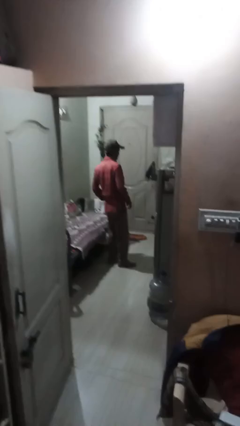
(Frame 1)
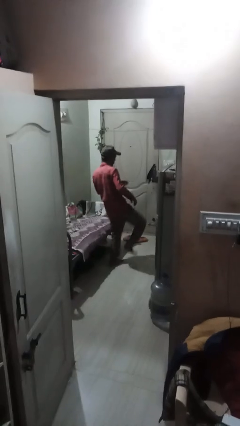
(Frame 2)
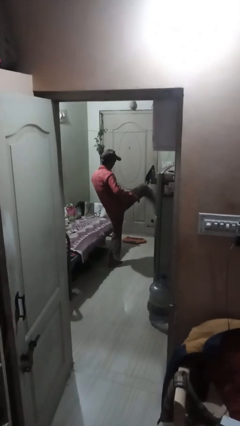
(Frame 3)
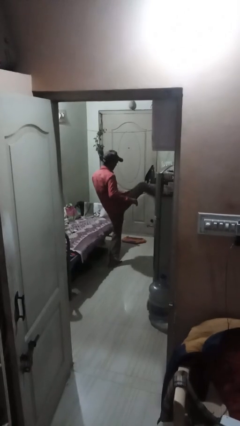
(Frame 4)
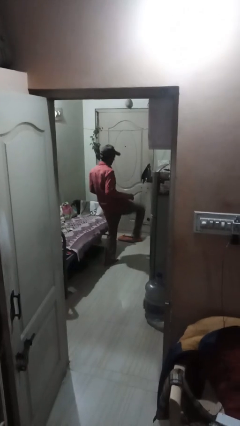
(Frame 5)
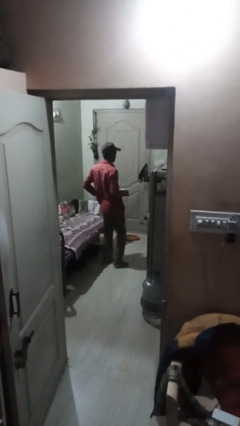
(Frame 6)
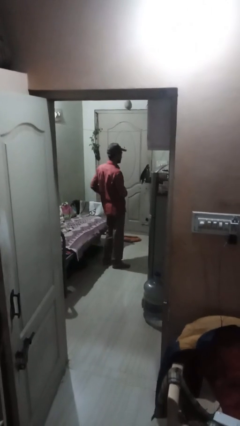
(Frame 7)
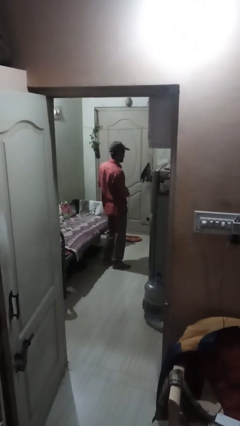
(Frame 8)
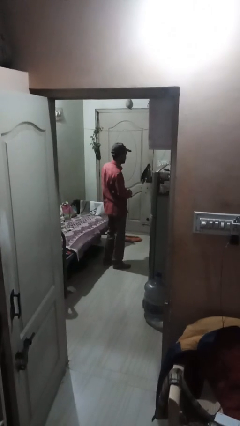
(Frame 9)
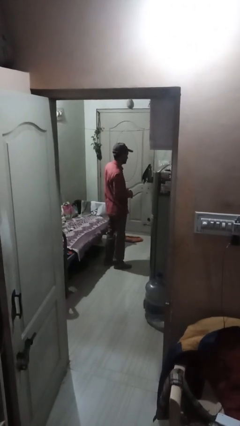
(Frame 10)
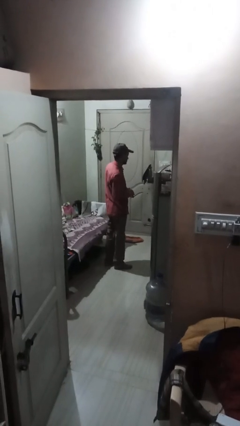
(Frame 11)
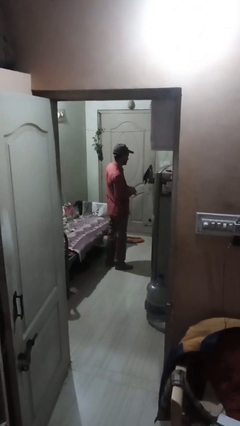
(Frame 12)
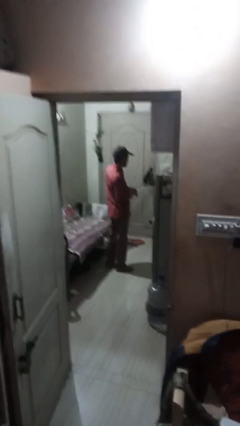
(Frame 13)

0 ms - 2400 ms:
person karate kicks

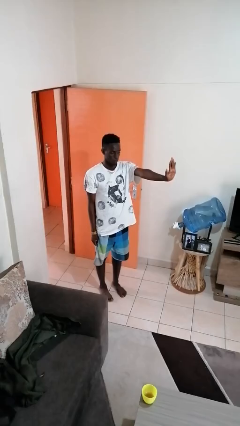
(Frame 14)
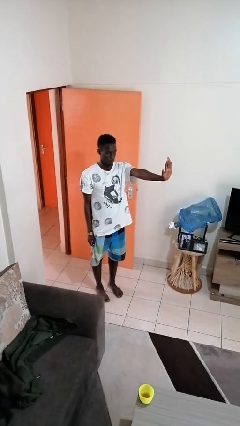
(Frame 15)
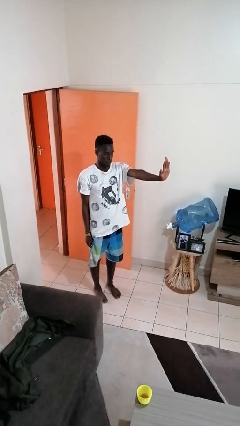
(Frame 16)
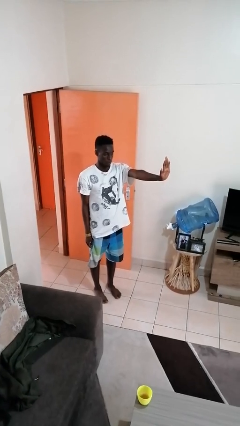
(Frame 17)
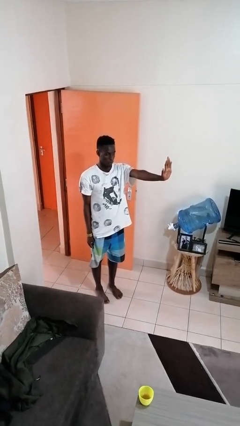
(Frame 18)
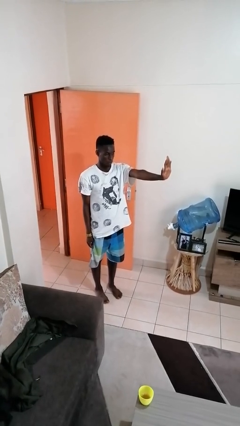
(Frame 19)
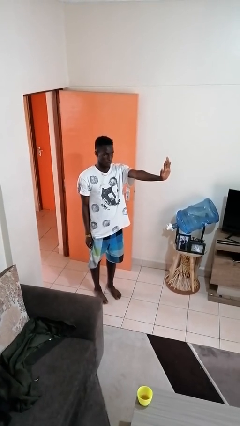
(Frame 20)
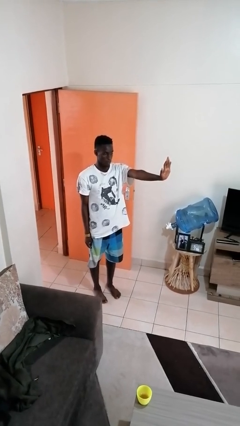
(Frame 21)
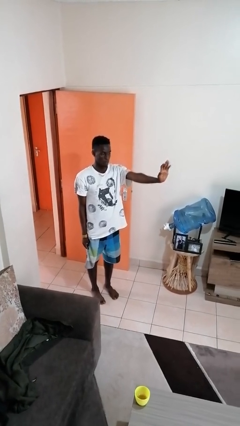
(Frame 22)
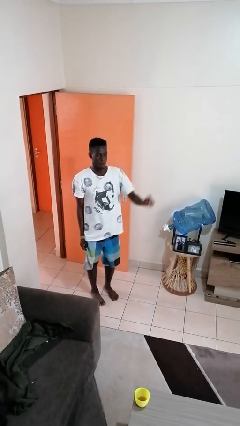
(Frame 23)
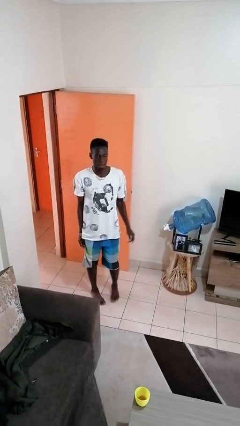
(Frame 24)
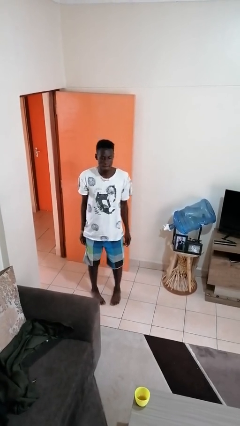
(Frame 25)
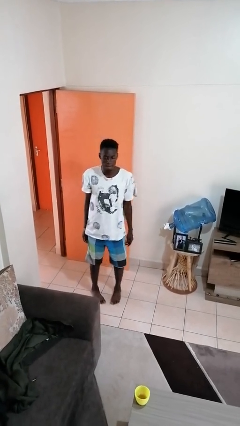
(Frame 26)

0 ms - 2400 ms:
person gestures stop

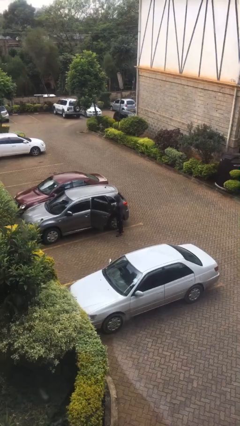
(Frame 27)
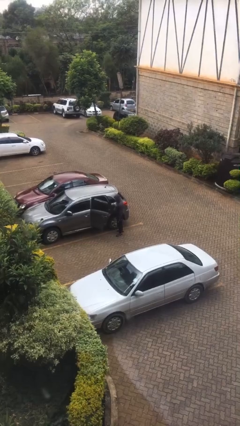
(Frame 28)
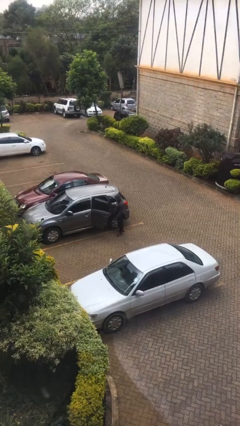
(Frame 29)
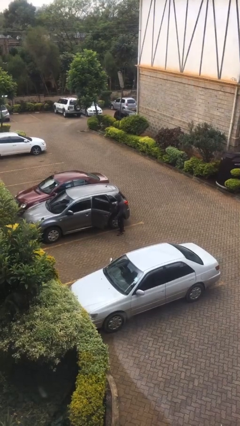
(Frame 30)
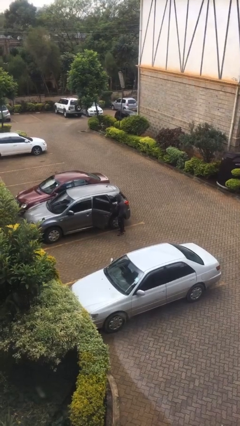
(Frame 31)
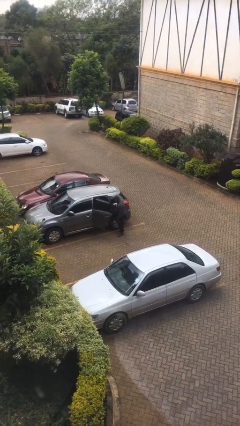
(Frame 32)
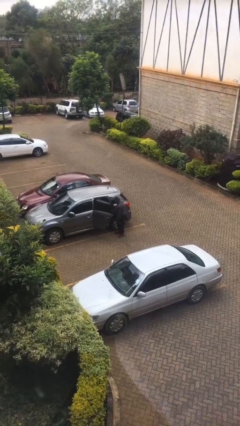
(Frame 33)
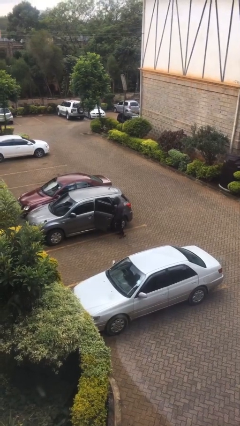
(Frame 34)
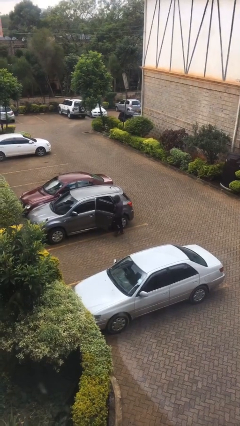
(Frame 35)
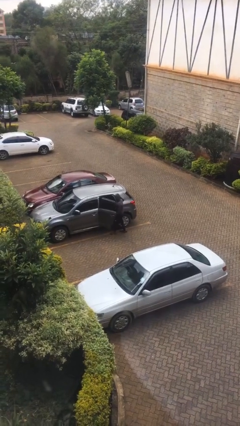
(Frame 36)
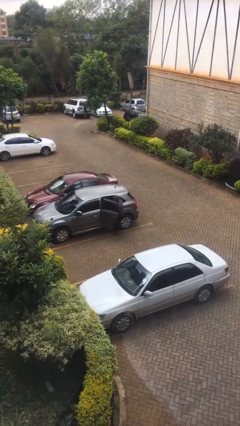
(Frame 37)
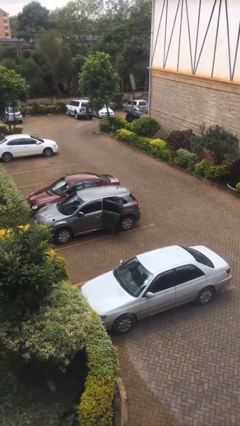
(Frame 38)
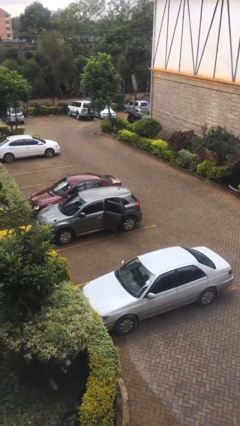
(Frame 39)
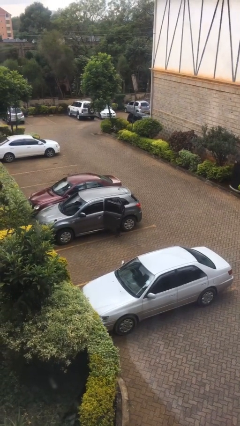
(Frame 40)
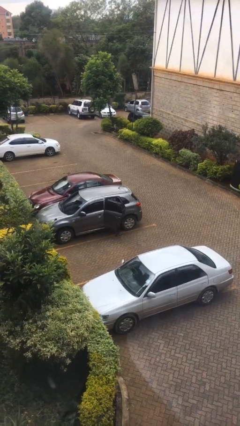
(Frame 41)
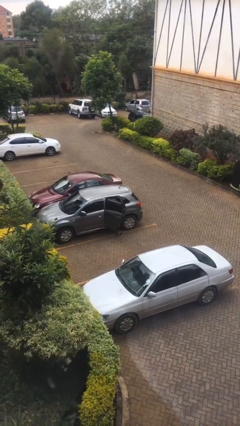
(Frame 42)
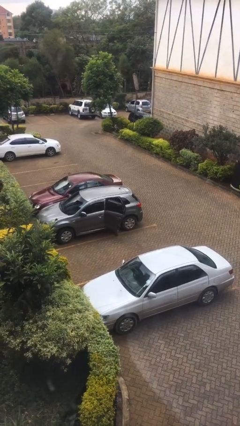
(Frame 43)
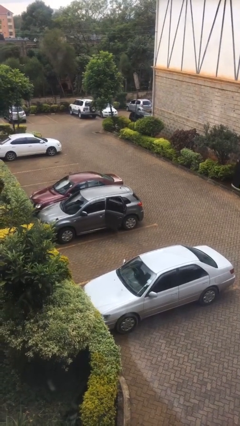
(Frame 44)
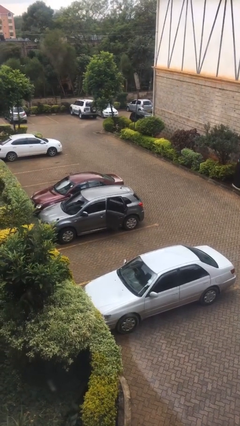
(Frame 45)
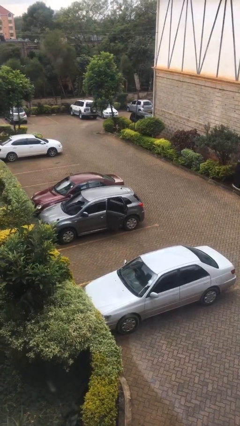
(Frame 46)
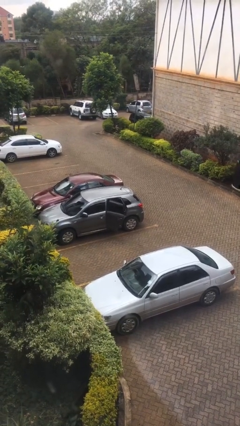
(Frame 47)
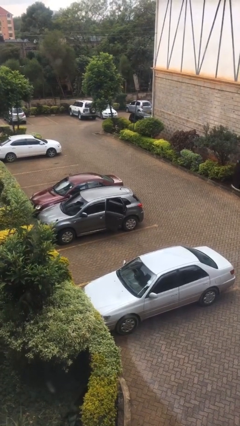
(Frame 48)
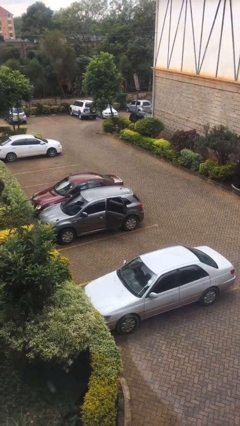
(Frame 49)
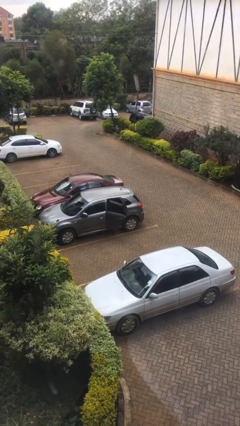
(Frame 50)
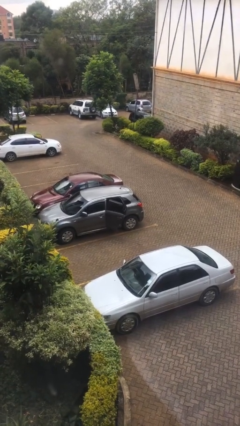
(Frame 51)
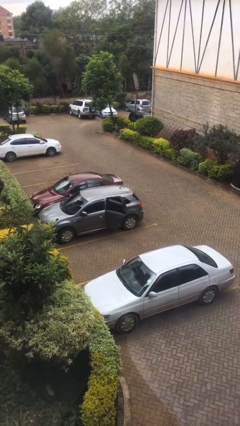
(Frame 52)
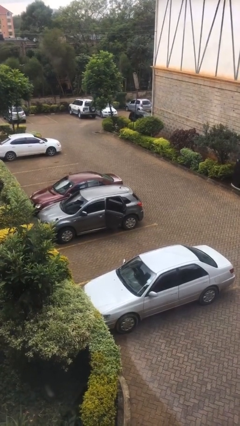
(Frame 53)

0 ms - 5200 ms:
person enters car

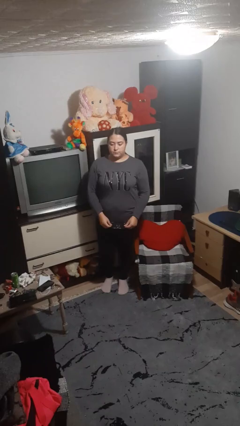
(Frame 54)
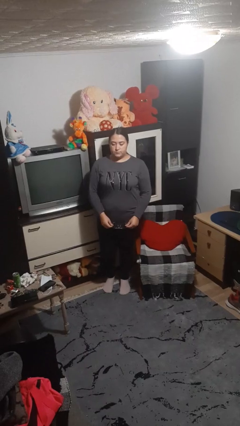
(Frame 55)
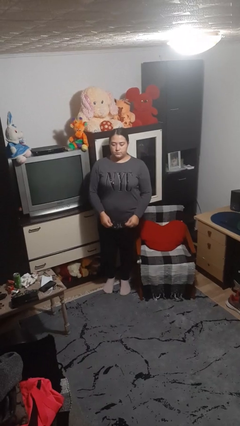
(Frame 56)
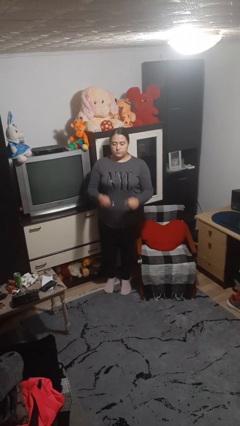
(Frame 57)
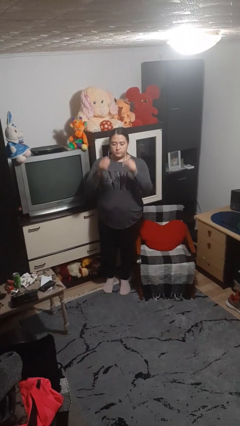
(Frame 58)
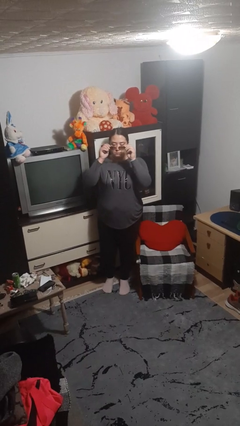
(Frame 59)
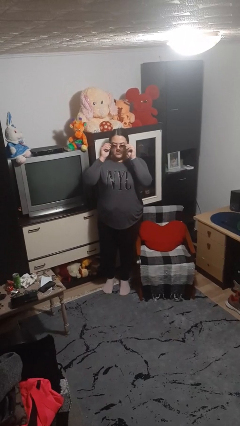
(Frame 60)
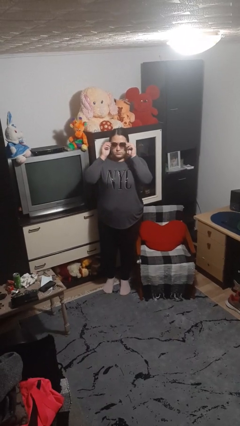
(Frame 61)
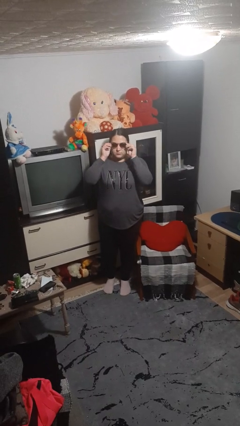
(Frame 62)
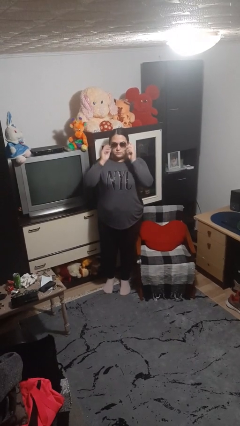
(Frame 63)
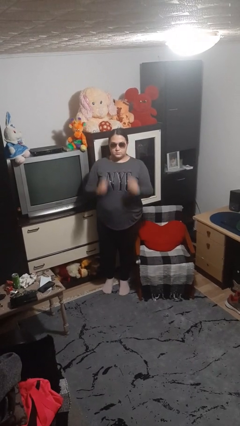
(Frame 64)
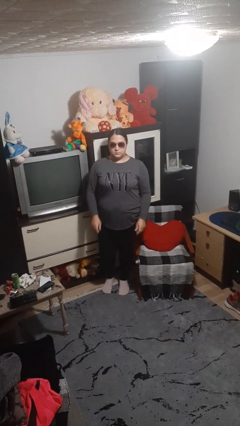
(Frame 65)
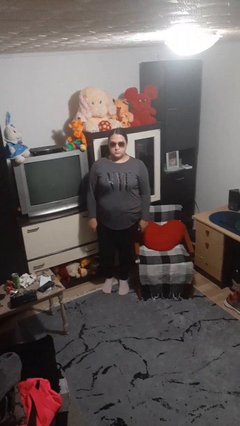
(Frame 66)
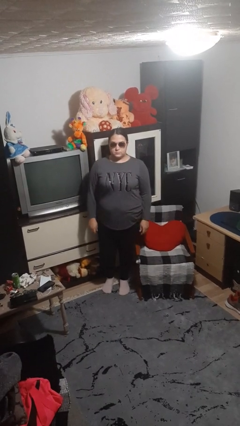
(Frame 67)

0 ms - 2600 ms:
person puts on sunglasses

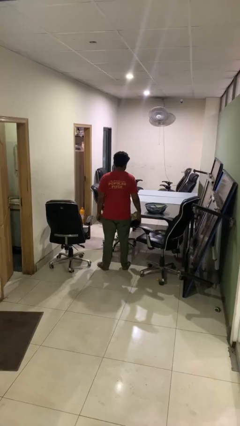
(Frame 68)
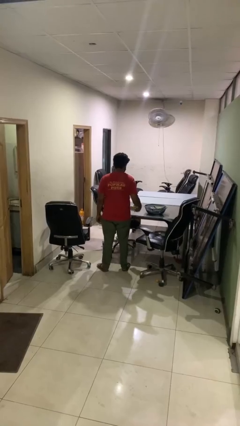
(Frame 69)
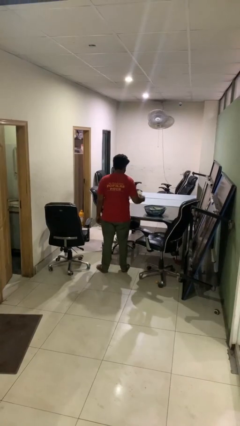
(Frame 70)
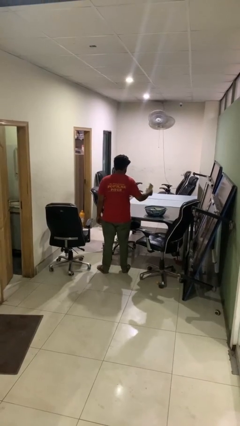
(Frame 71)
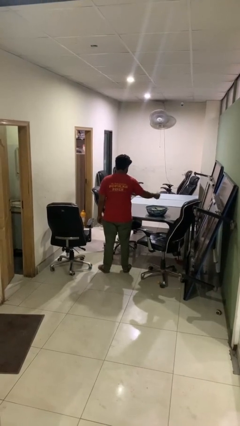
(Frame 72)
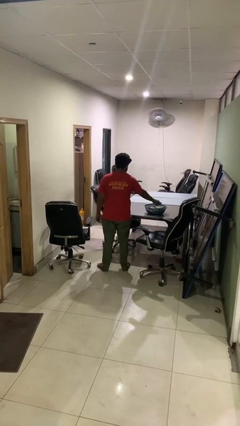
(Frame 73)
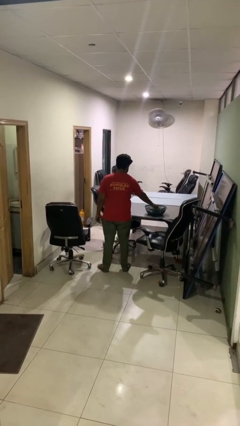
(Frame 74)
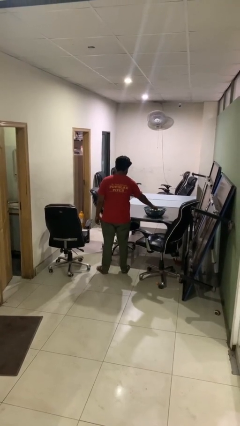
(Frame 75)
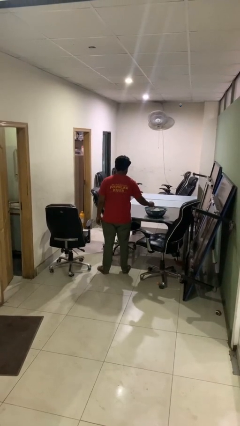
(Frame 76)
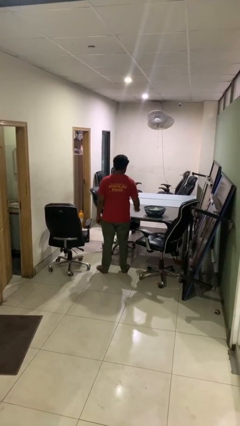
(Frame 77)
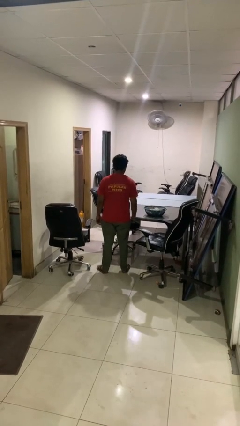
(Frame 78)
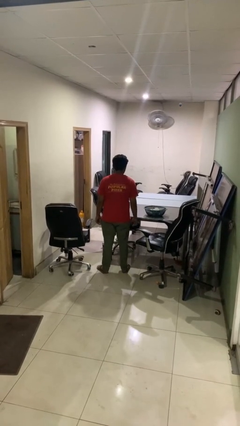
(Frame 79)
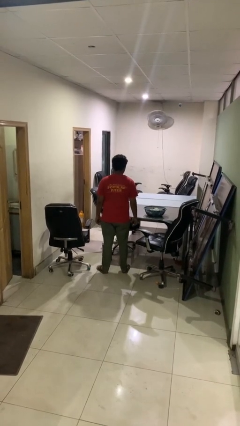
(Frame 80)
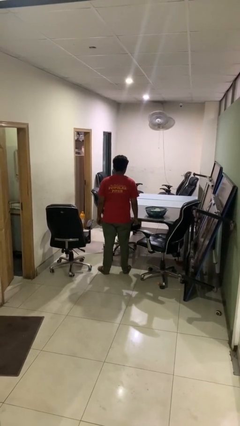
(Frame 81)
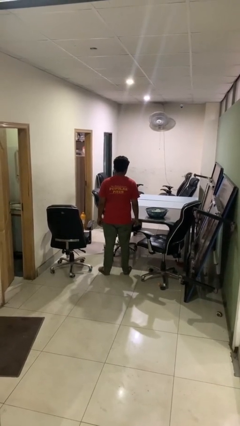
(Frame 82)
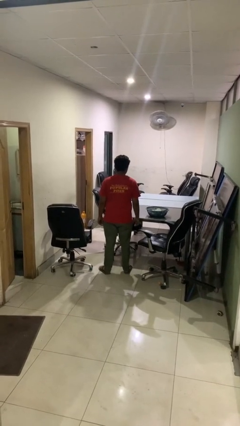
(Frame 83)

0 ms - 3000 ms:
person puts object into basket

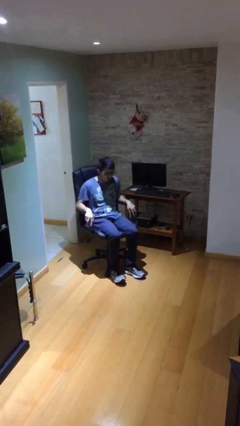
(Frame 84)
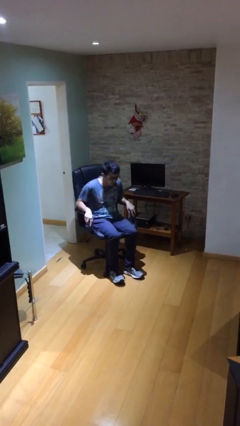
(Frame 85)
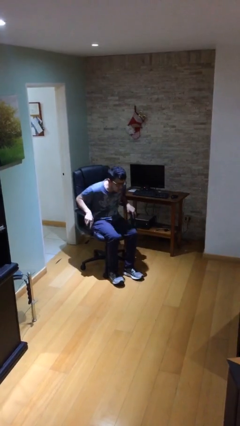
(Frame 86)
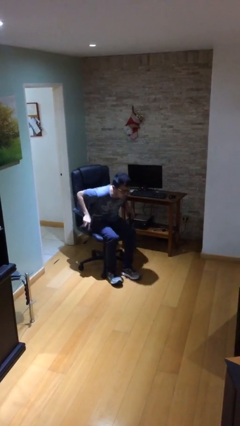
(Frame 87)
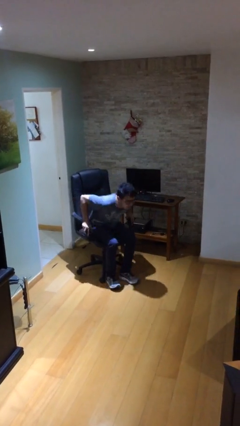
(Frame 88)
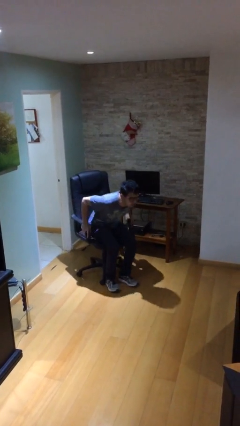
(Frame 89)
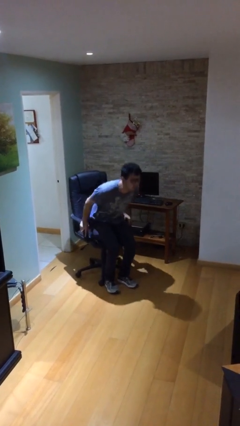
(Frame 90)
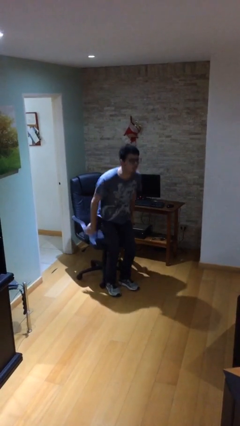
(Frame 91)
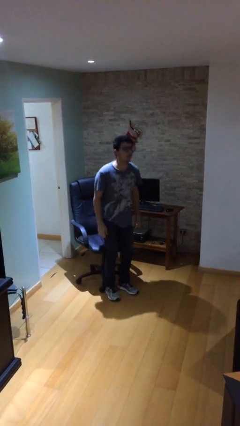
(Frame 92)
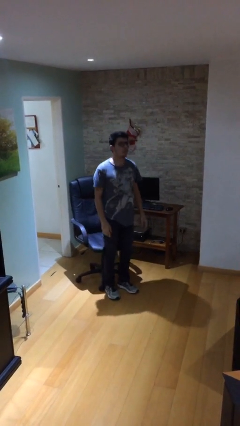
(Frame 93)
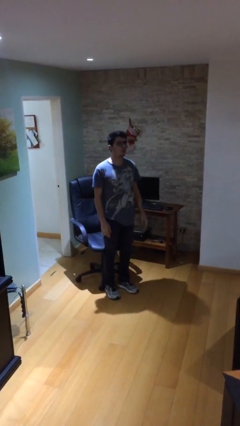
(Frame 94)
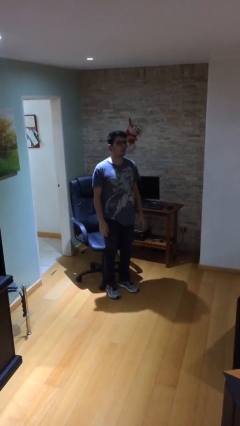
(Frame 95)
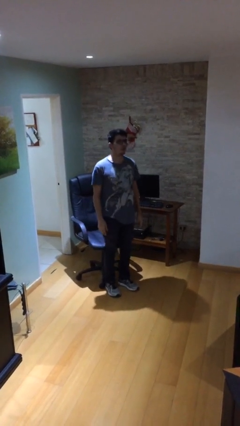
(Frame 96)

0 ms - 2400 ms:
person stands up
